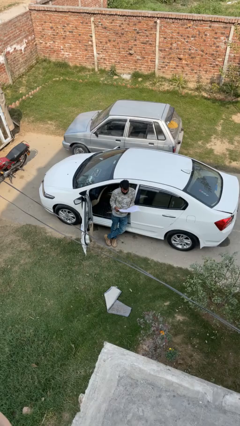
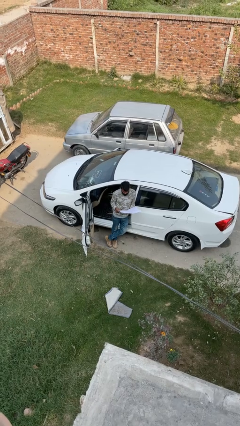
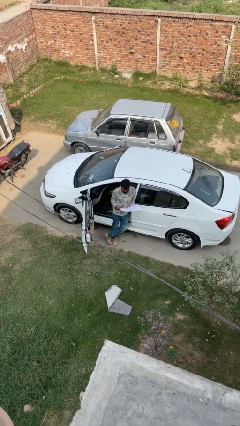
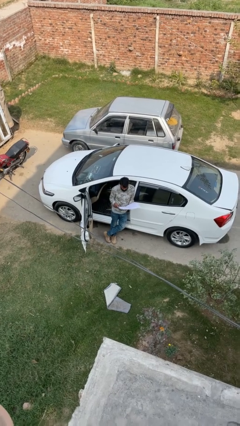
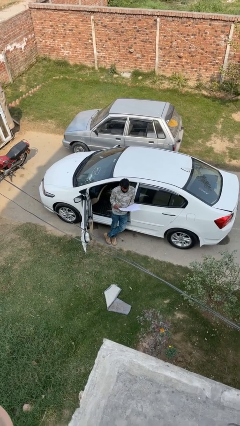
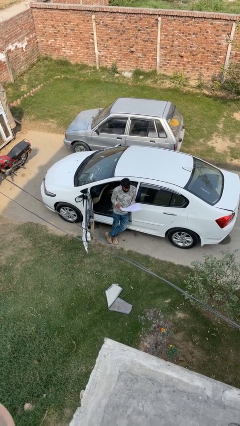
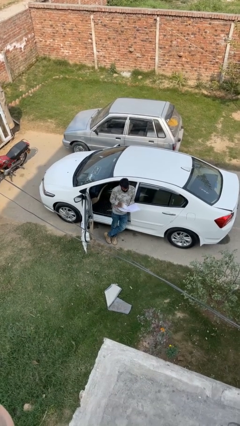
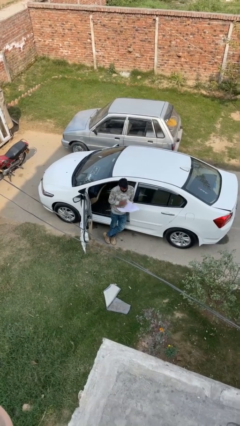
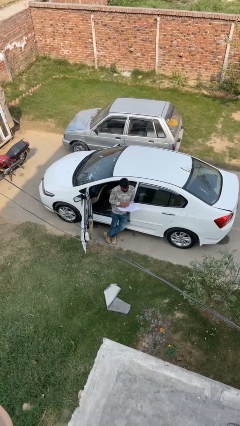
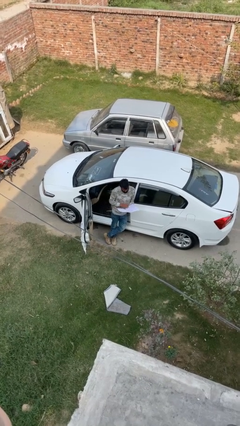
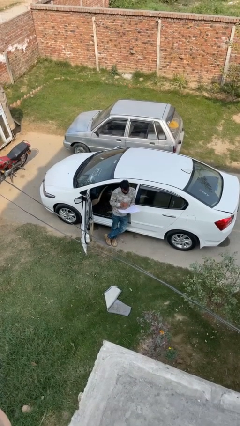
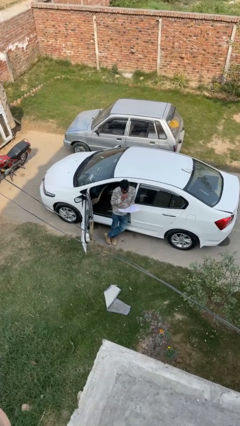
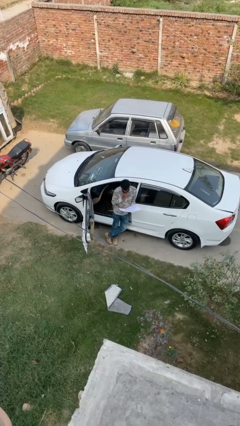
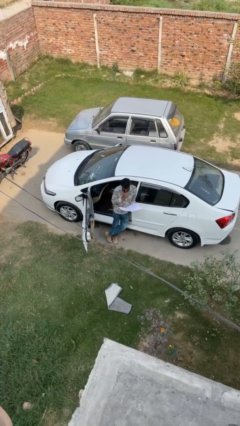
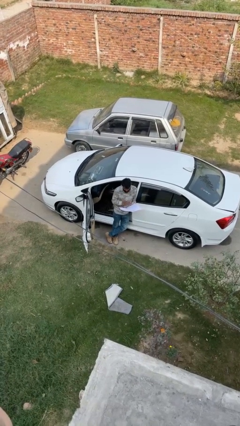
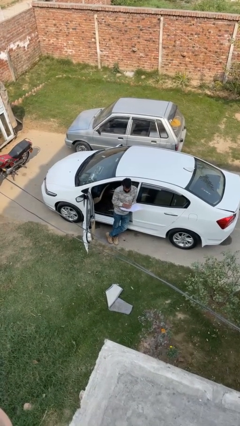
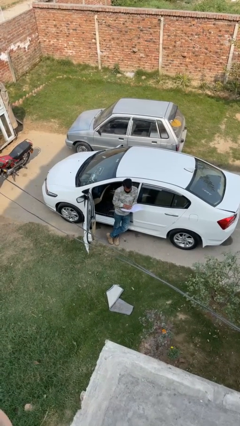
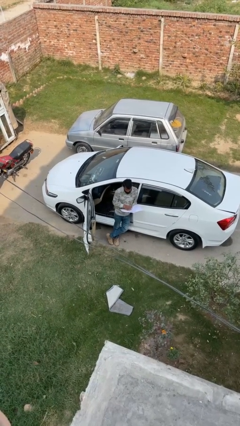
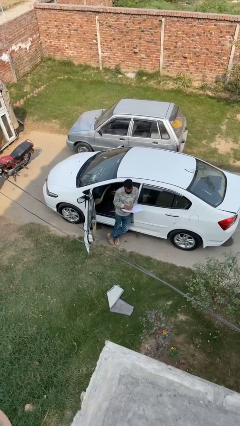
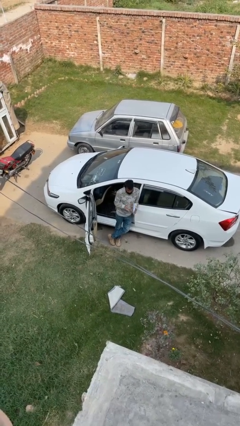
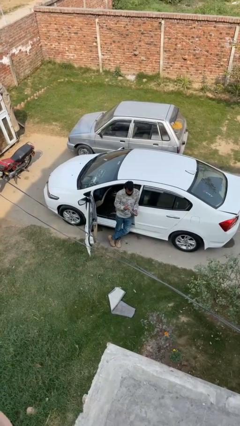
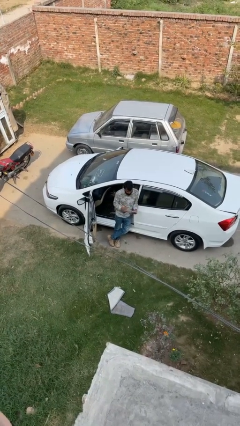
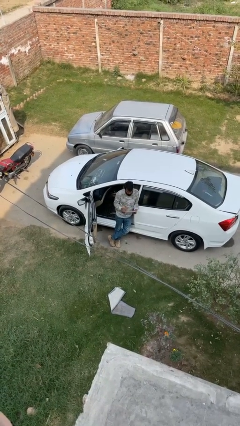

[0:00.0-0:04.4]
person reads document

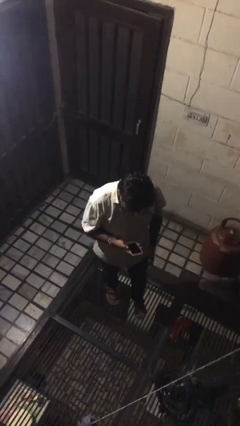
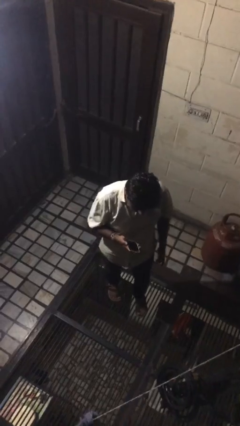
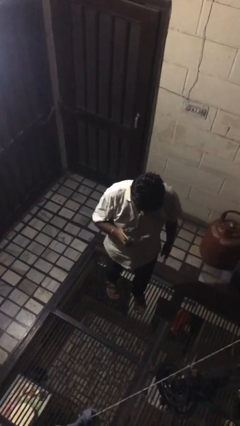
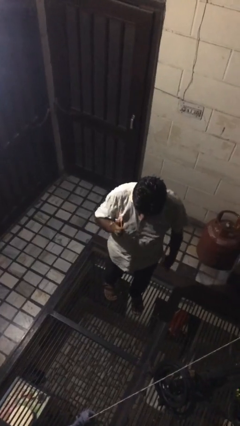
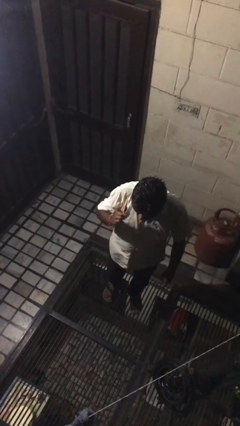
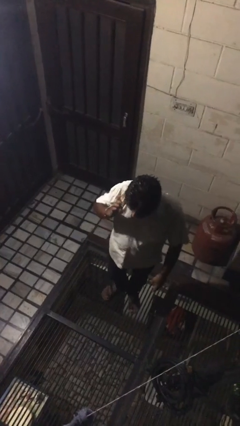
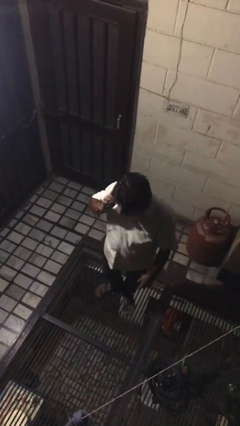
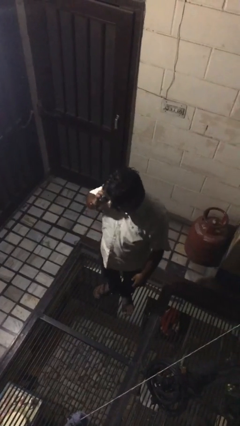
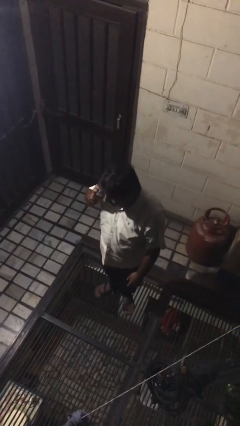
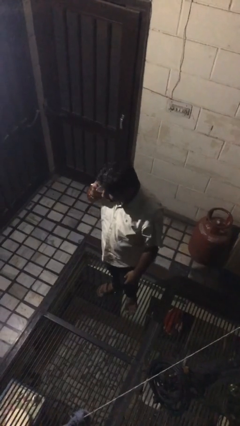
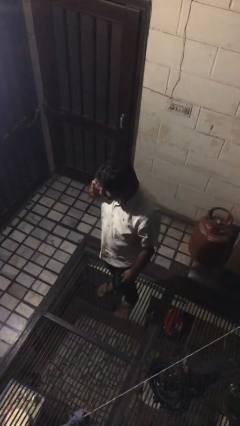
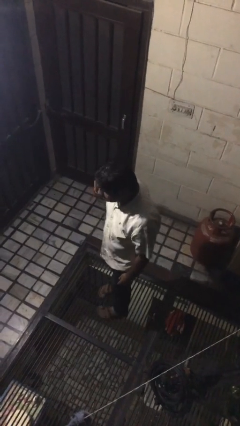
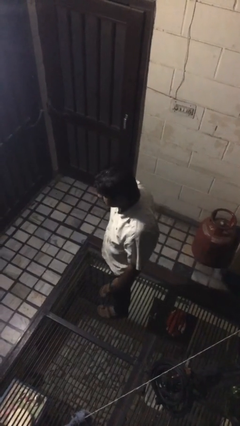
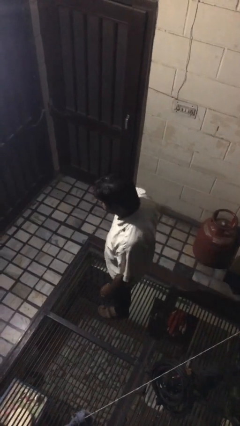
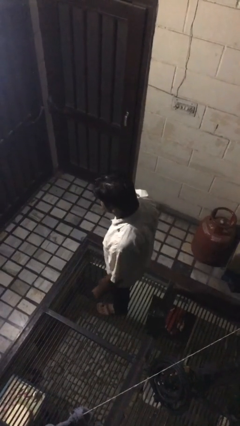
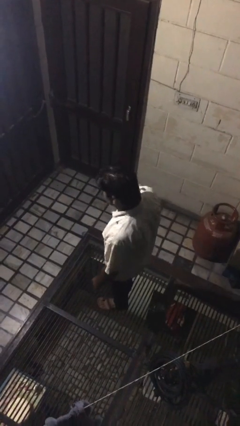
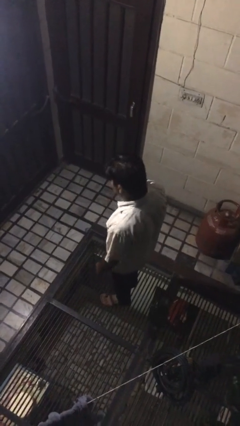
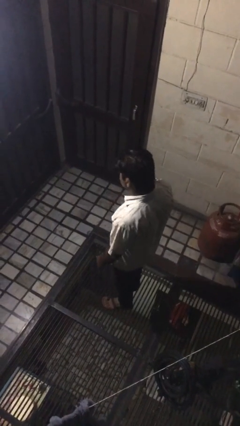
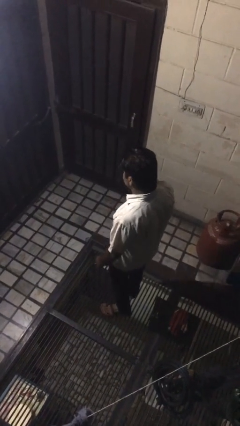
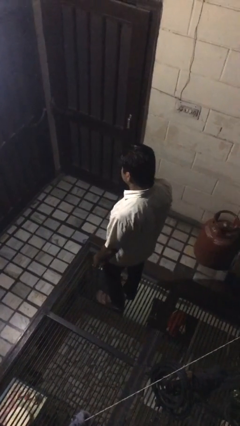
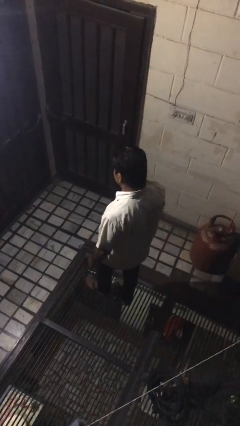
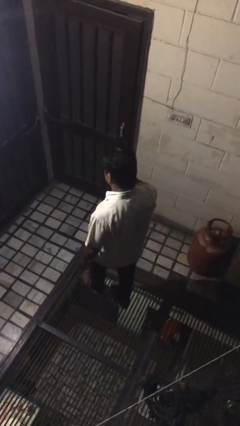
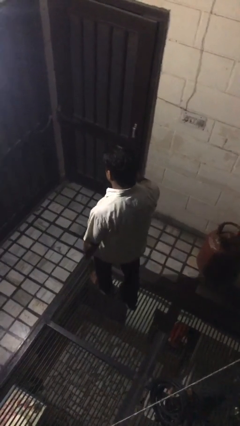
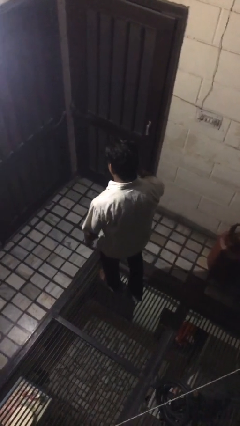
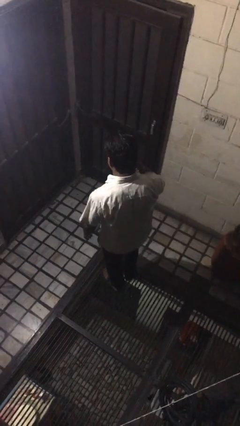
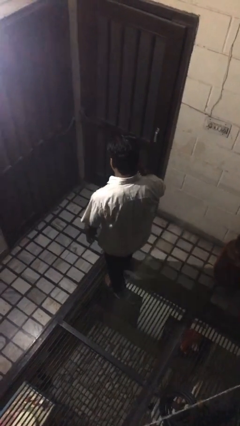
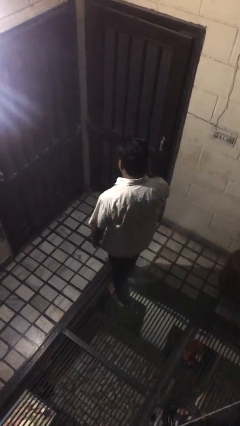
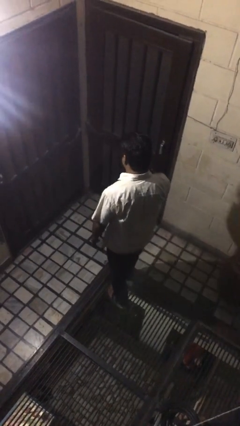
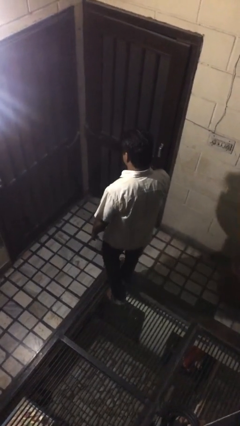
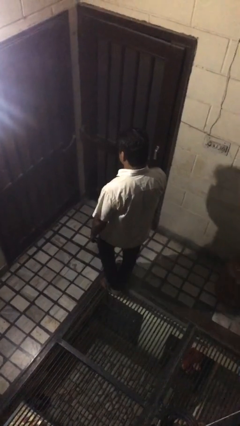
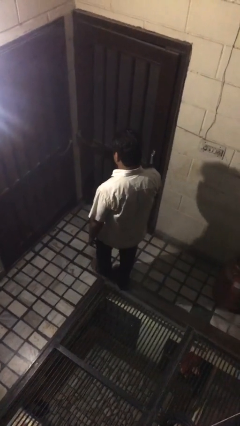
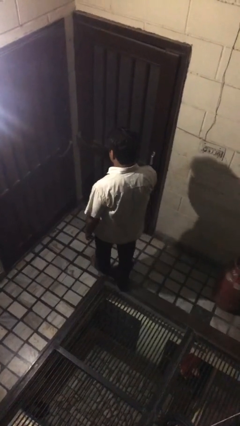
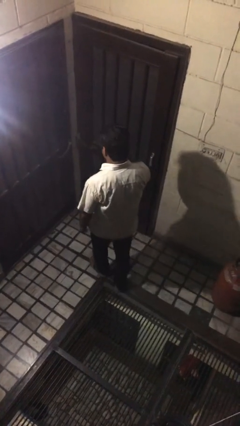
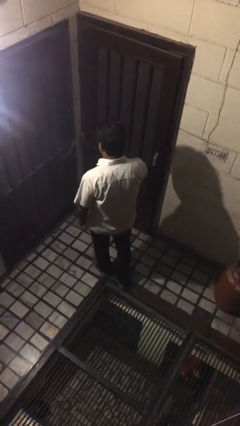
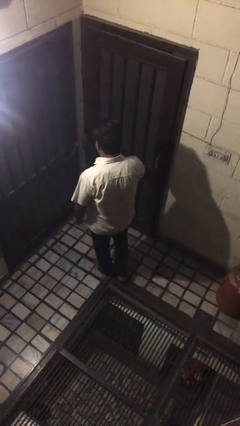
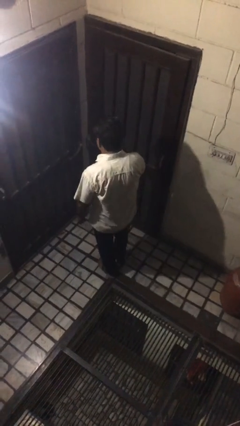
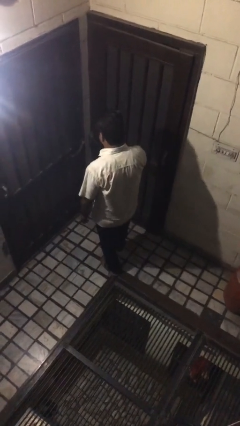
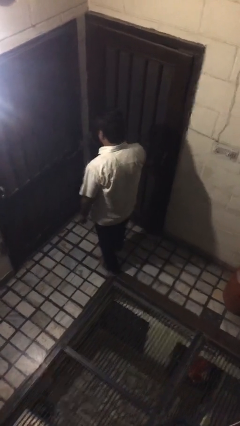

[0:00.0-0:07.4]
person talks on phone

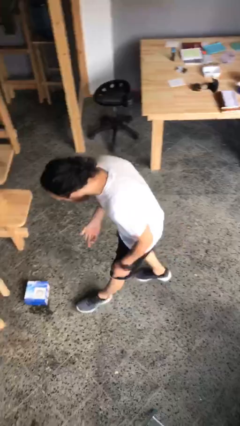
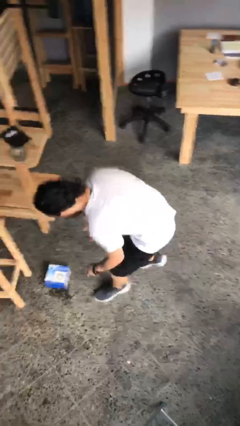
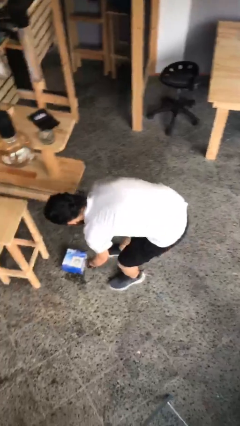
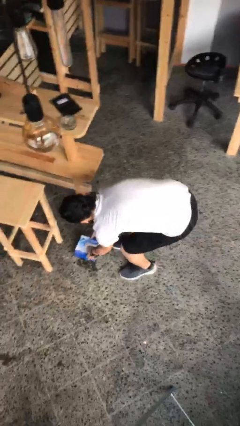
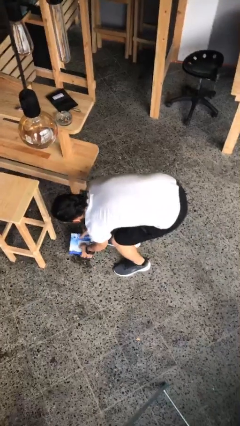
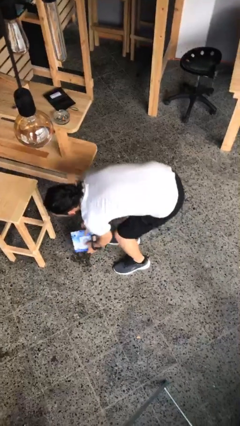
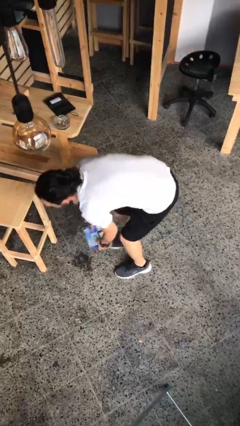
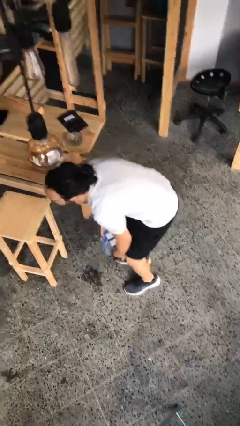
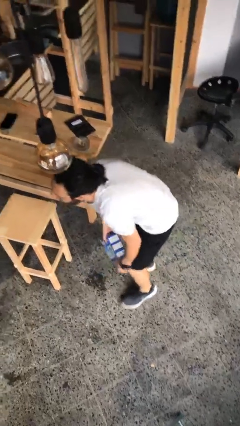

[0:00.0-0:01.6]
person picks up object from floor

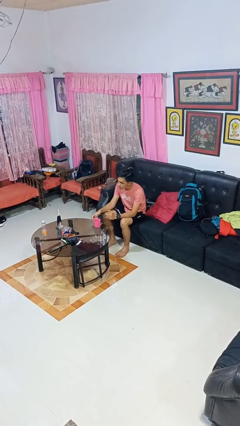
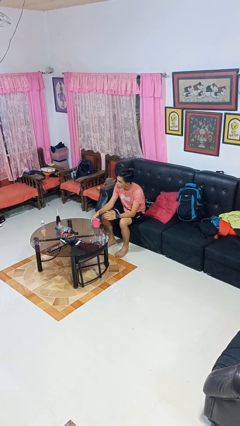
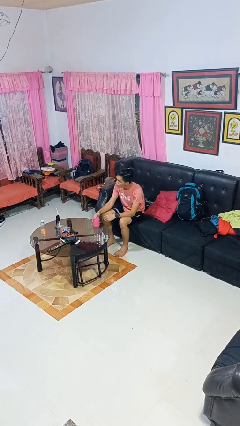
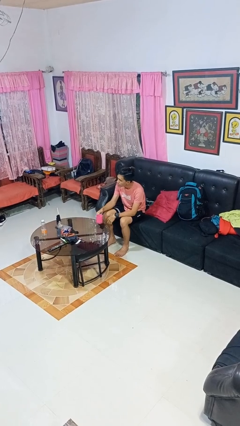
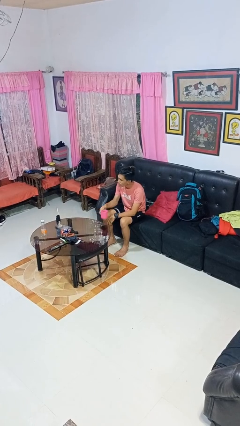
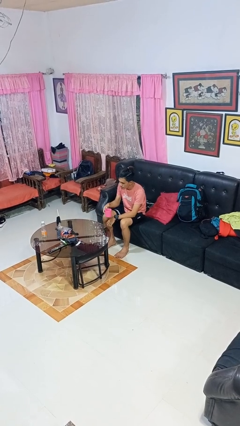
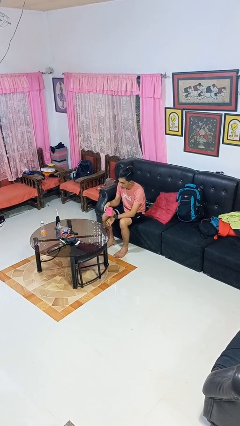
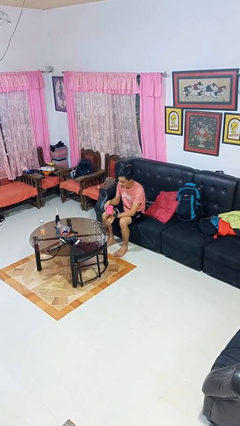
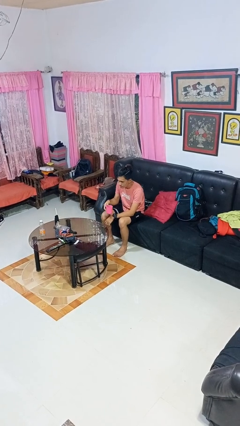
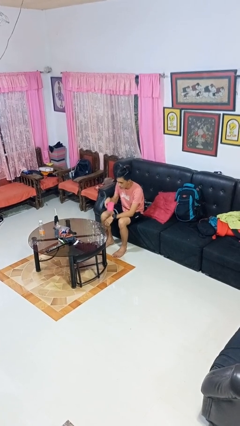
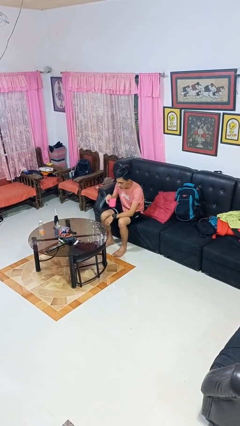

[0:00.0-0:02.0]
person picks up object from table

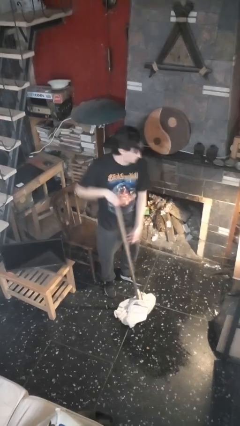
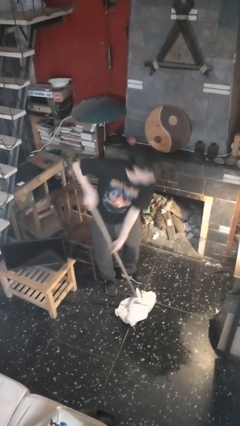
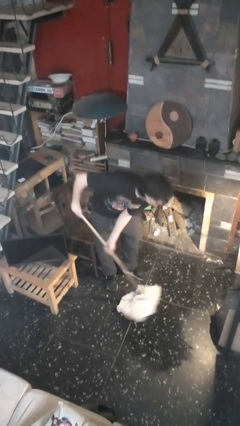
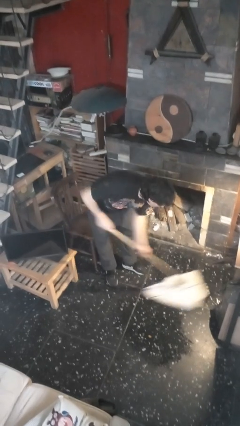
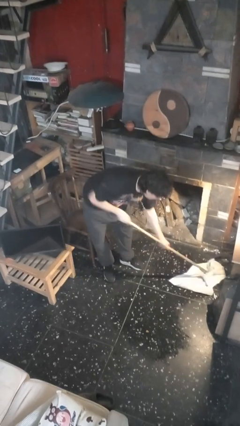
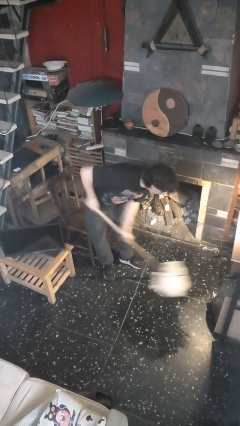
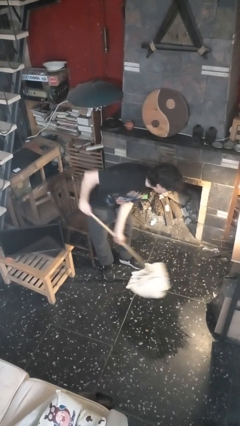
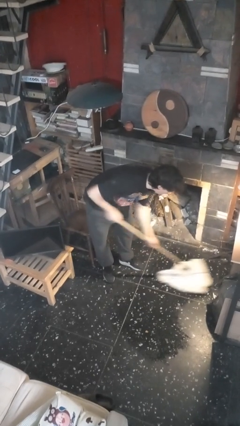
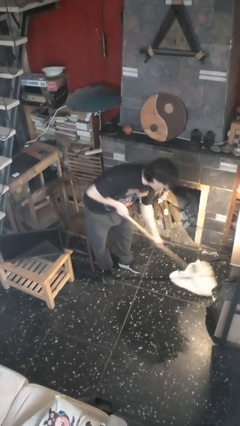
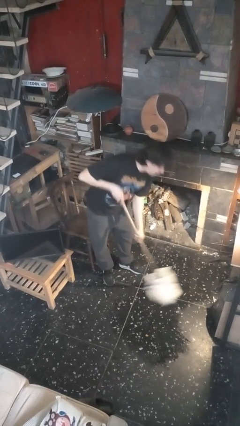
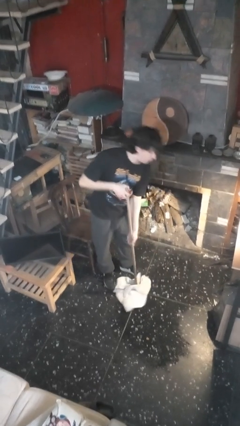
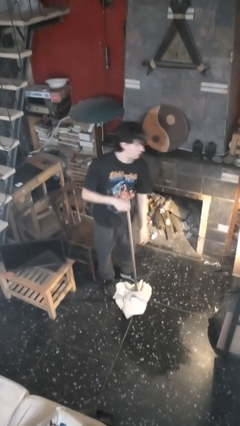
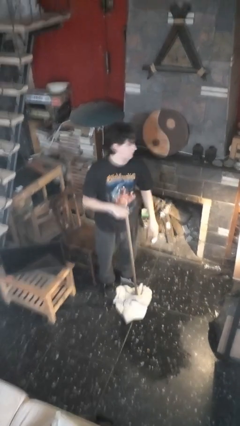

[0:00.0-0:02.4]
person mops
